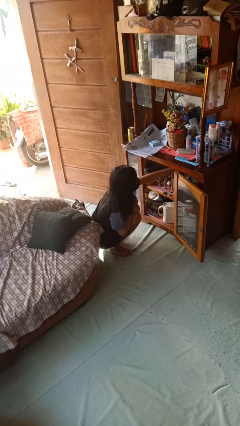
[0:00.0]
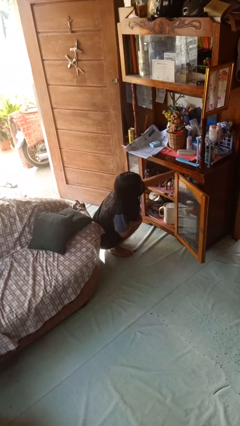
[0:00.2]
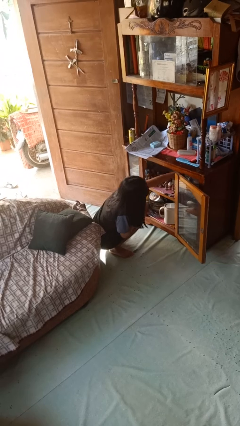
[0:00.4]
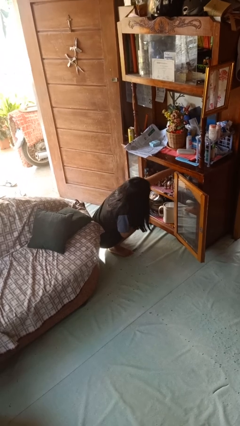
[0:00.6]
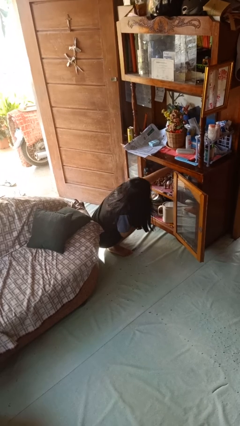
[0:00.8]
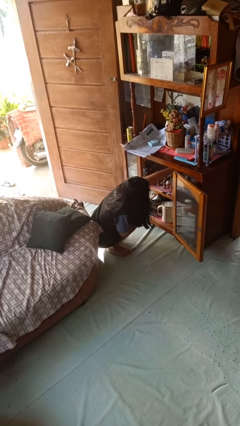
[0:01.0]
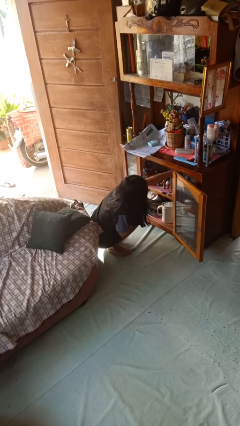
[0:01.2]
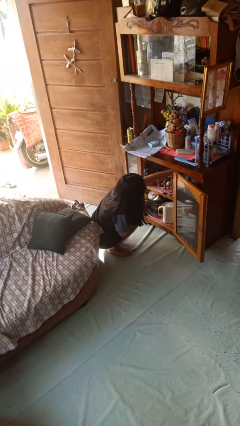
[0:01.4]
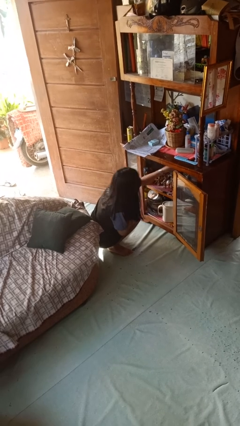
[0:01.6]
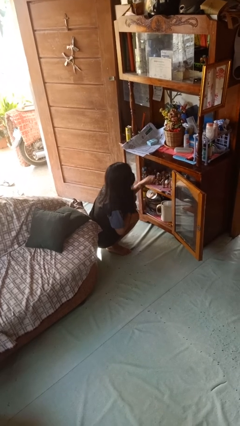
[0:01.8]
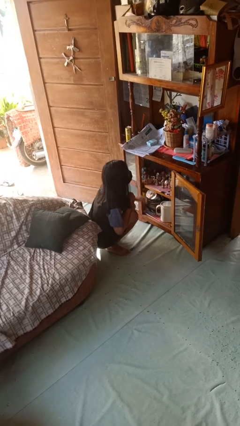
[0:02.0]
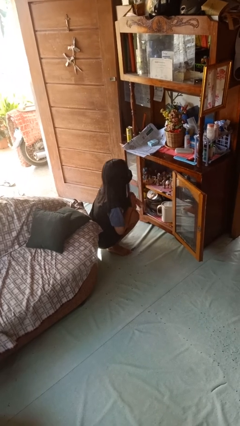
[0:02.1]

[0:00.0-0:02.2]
person searches in cabinet

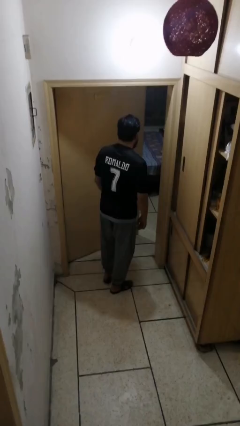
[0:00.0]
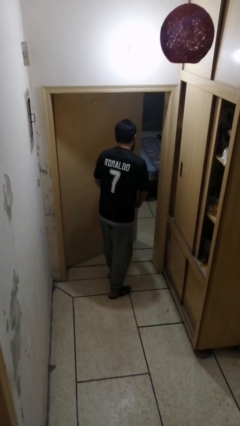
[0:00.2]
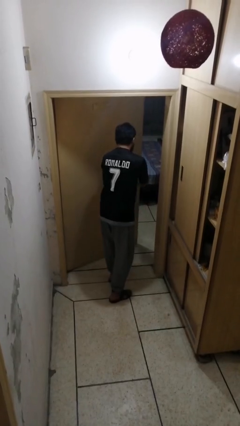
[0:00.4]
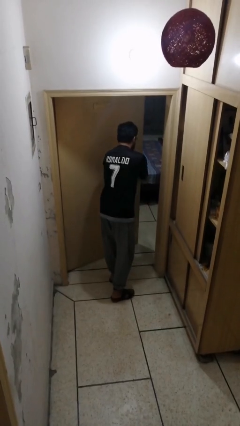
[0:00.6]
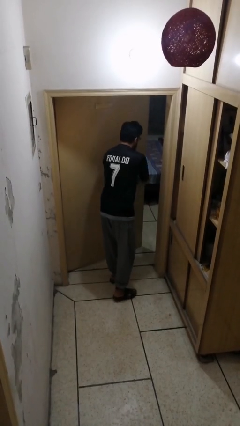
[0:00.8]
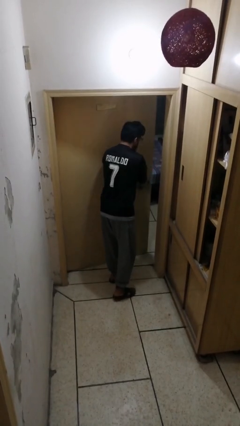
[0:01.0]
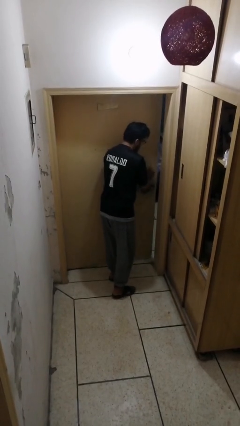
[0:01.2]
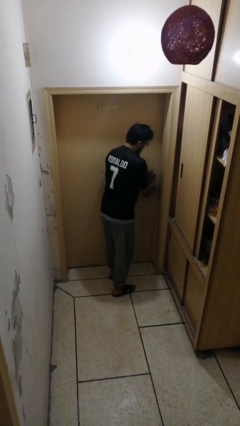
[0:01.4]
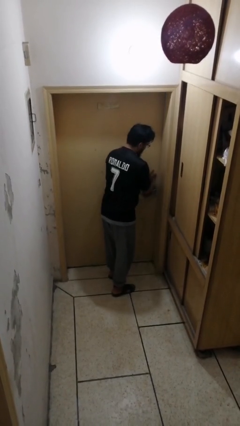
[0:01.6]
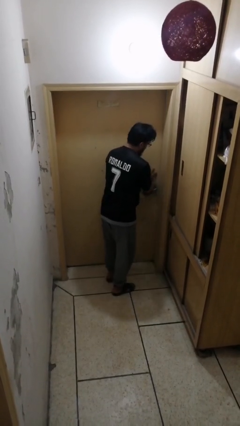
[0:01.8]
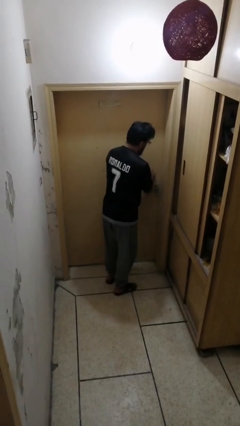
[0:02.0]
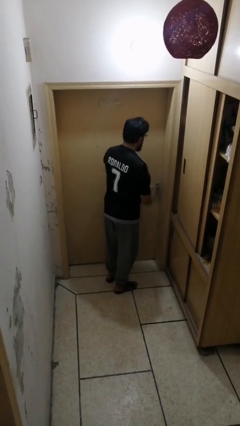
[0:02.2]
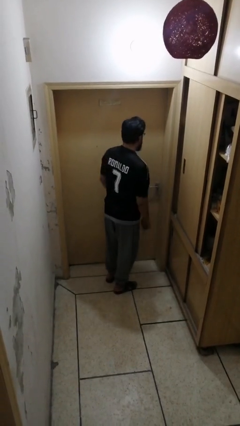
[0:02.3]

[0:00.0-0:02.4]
person closes facility door

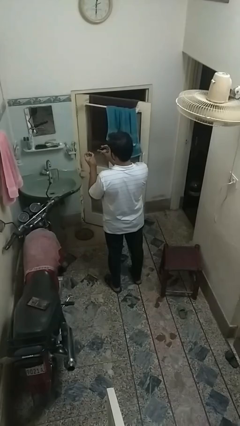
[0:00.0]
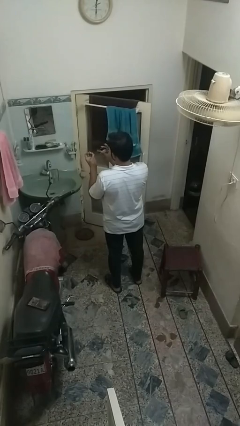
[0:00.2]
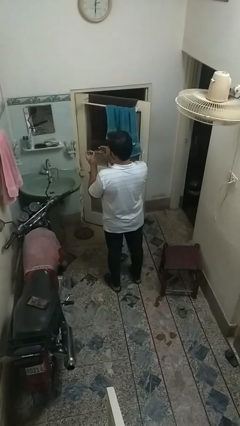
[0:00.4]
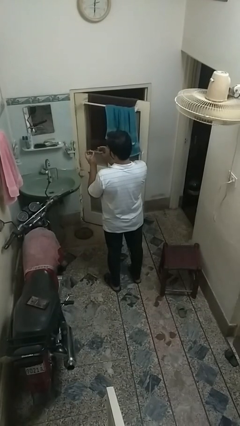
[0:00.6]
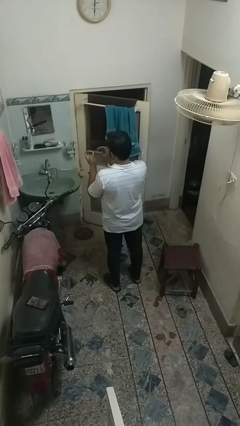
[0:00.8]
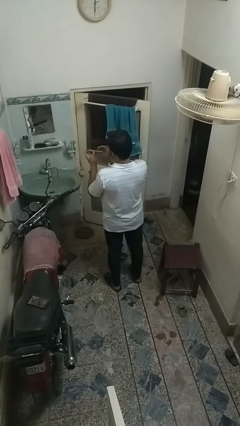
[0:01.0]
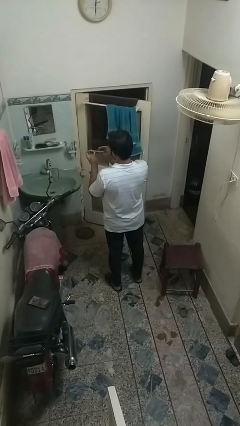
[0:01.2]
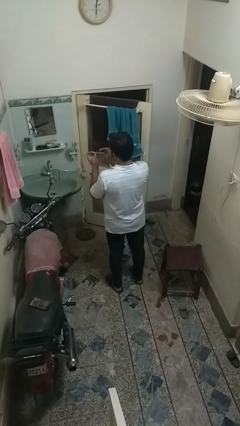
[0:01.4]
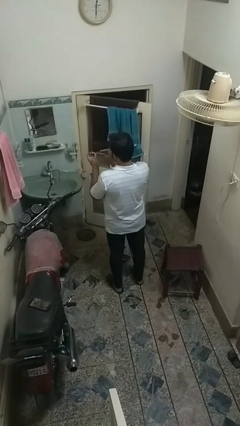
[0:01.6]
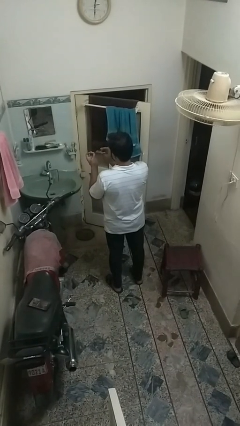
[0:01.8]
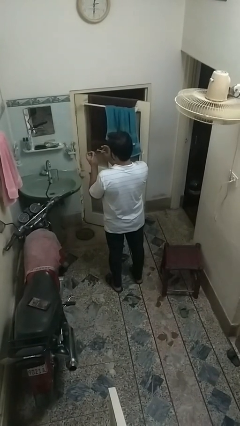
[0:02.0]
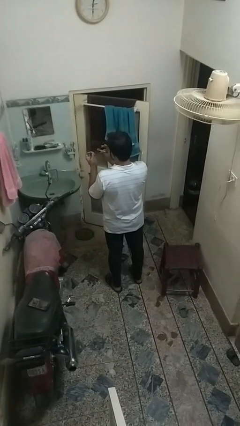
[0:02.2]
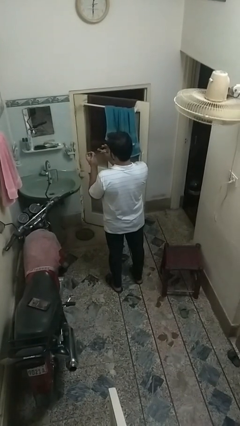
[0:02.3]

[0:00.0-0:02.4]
person clips fingernails

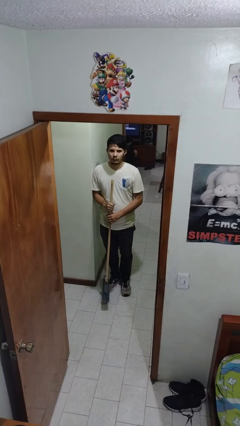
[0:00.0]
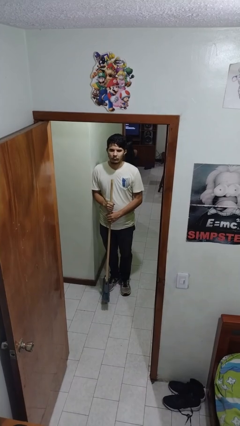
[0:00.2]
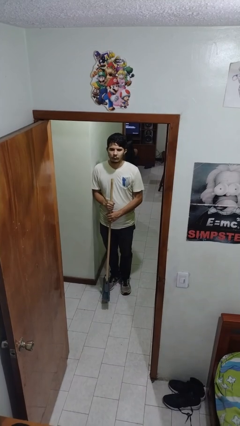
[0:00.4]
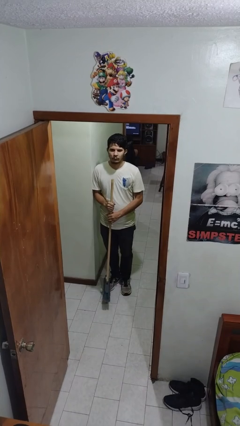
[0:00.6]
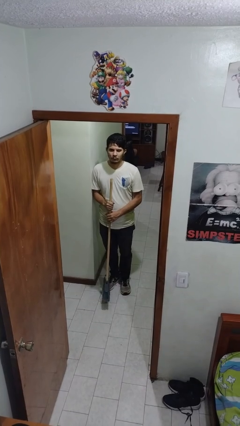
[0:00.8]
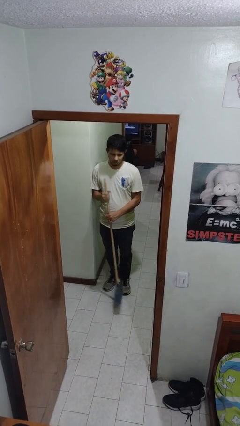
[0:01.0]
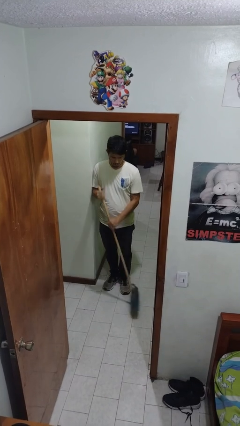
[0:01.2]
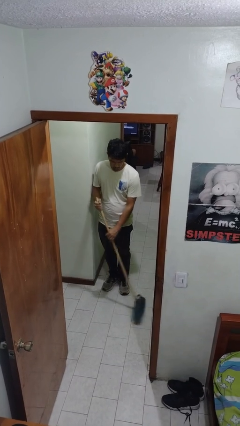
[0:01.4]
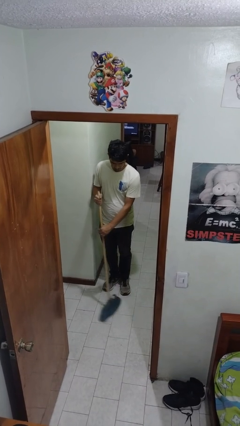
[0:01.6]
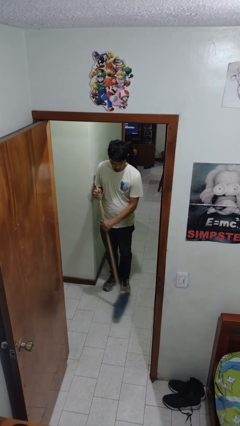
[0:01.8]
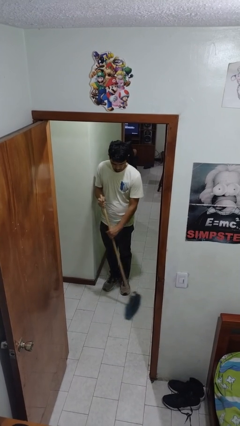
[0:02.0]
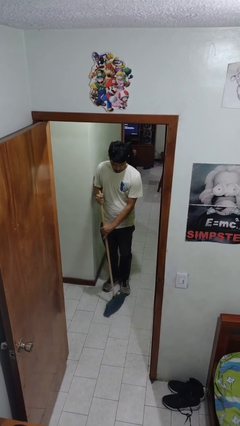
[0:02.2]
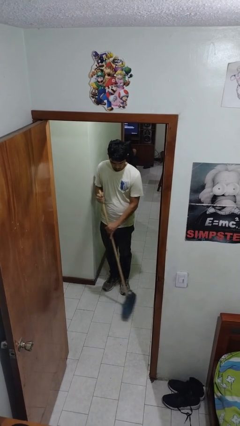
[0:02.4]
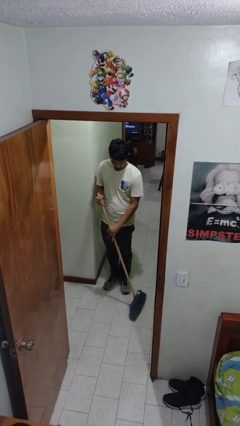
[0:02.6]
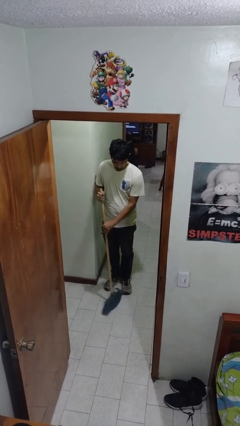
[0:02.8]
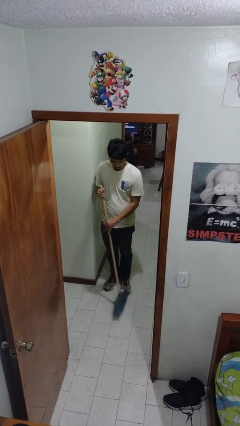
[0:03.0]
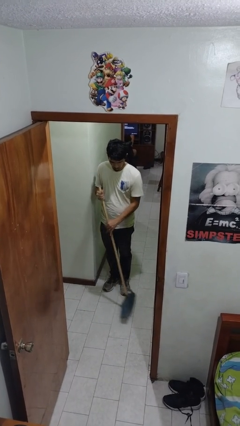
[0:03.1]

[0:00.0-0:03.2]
person sweeps floor

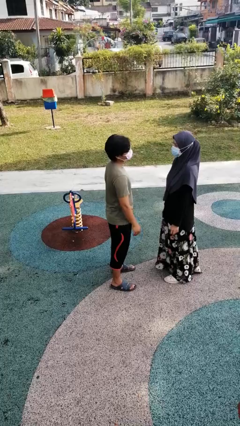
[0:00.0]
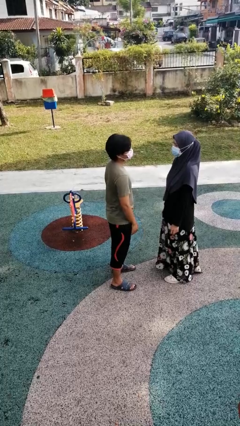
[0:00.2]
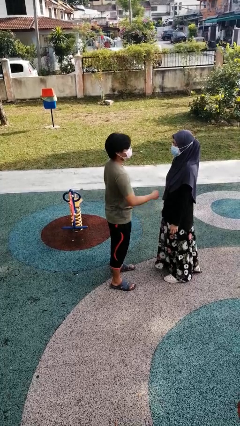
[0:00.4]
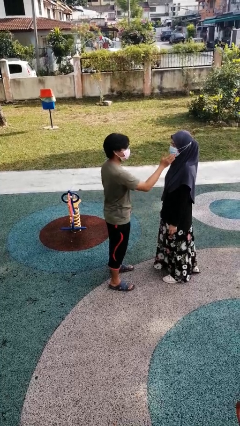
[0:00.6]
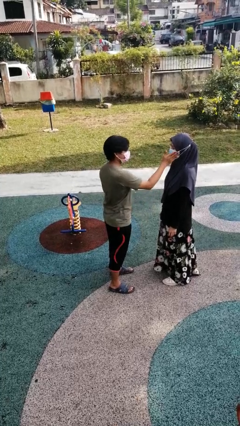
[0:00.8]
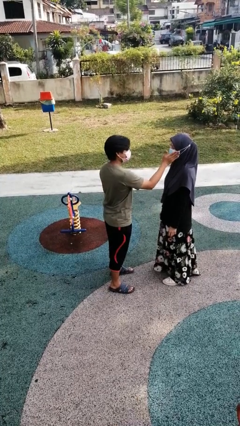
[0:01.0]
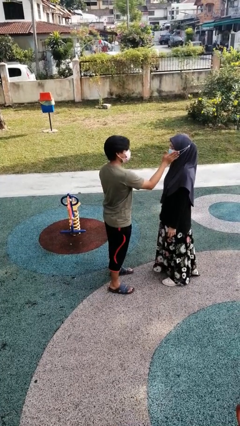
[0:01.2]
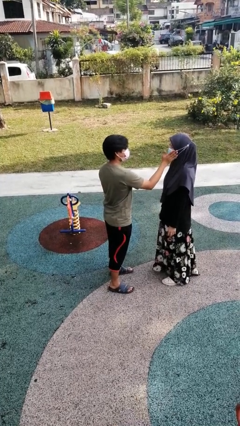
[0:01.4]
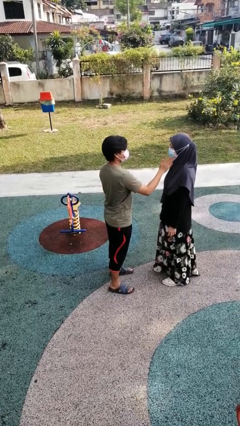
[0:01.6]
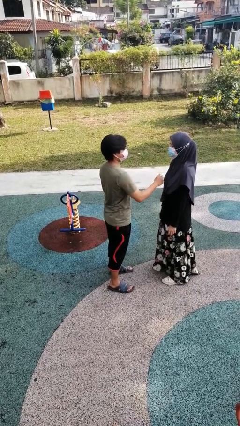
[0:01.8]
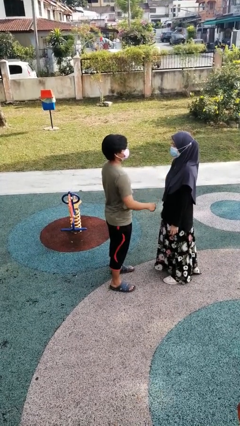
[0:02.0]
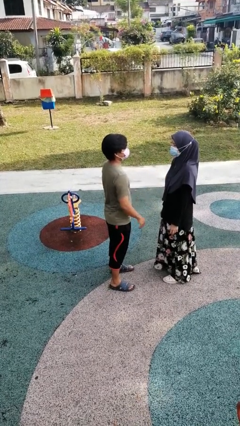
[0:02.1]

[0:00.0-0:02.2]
person touches face of person

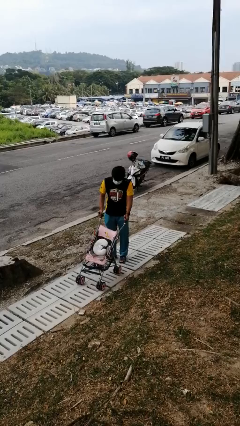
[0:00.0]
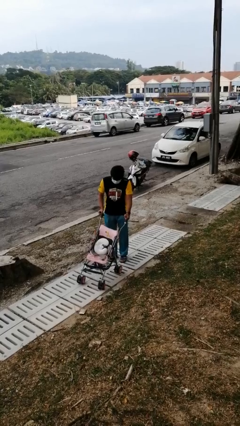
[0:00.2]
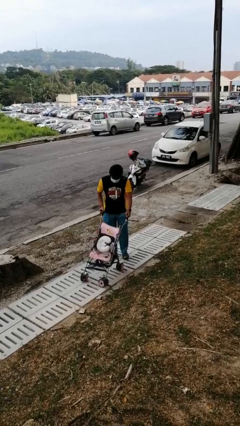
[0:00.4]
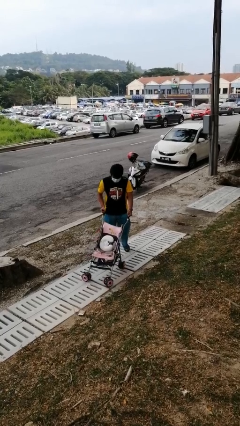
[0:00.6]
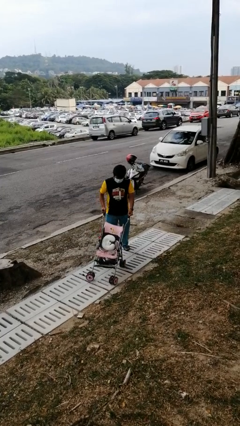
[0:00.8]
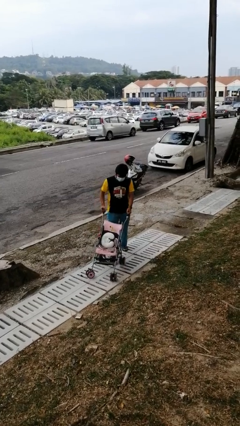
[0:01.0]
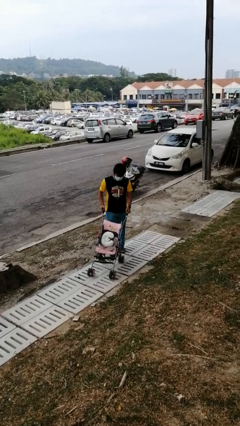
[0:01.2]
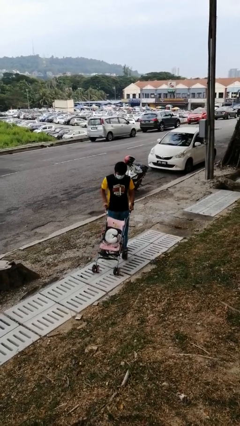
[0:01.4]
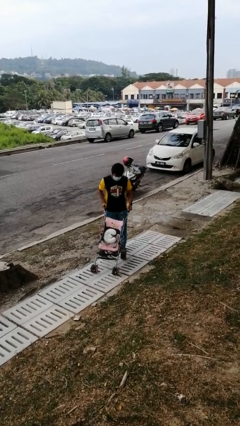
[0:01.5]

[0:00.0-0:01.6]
person pulls wheeled cart

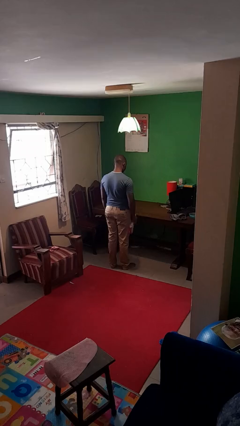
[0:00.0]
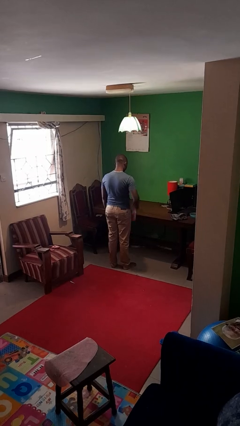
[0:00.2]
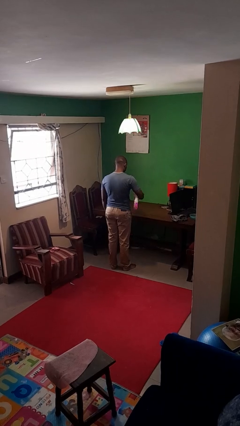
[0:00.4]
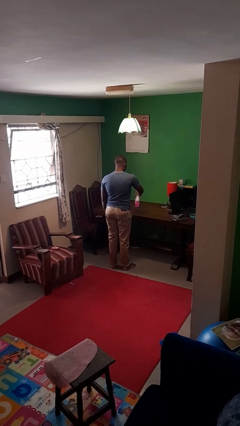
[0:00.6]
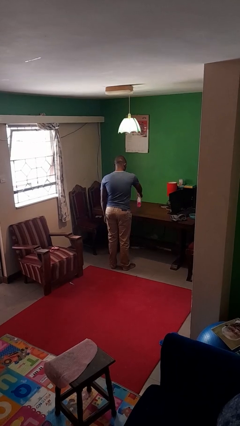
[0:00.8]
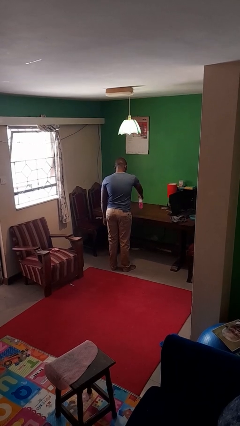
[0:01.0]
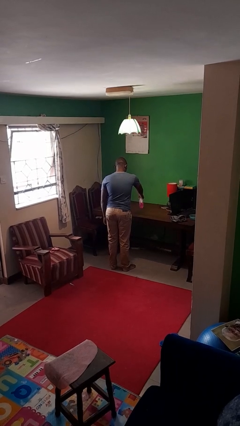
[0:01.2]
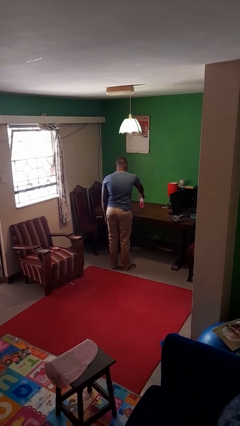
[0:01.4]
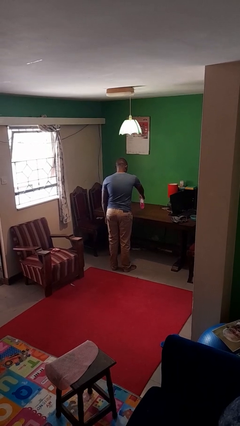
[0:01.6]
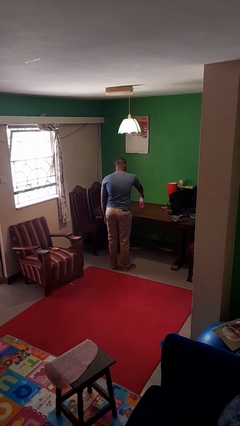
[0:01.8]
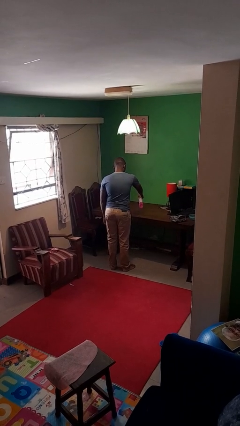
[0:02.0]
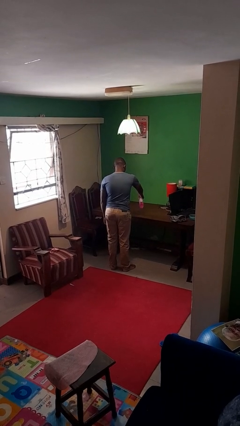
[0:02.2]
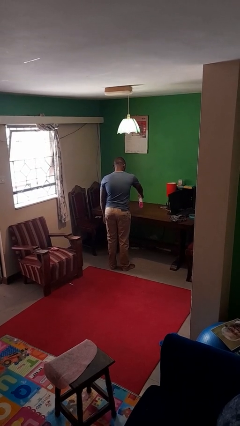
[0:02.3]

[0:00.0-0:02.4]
person sprays from bottle

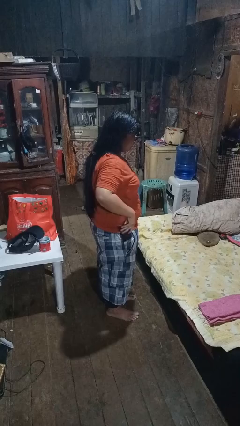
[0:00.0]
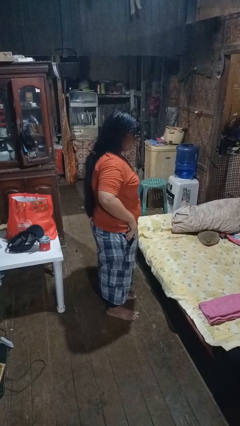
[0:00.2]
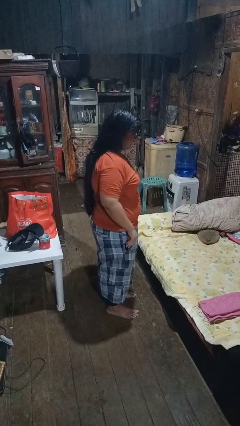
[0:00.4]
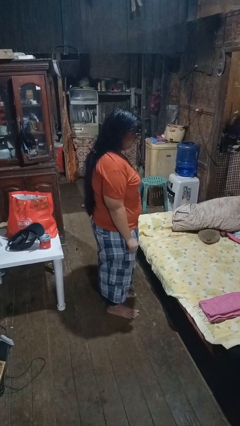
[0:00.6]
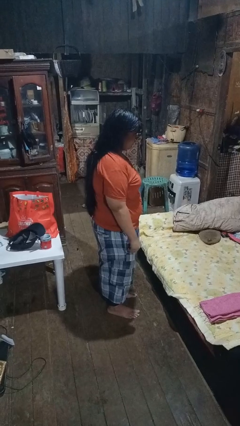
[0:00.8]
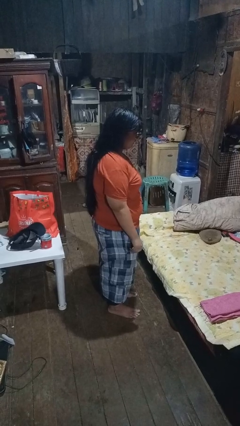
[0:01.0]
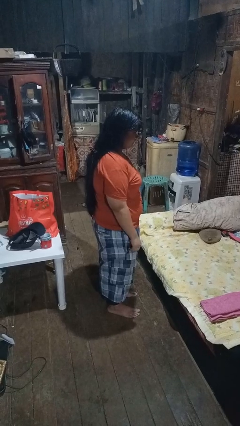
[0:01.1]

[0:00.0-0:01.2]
person puts phone into pocket
